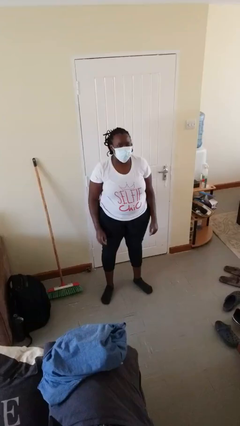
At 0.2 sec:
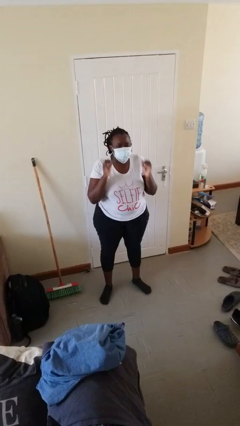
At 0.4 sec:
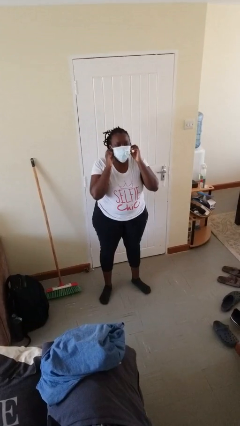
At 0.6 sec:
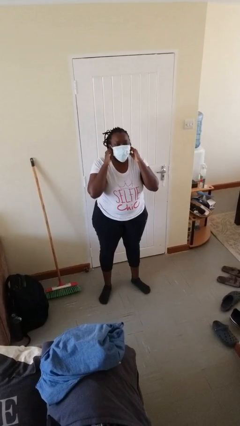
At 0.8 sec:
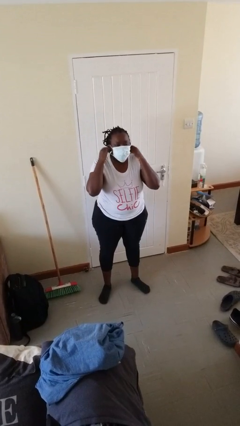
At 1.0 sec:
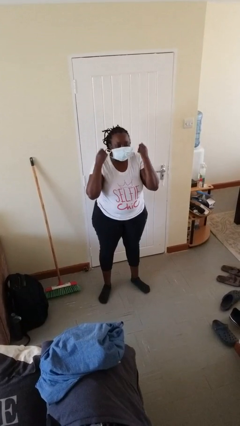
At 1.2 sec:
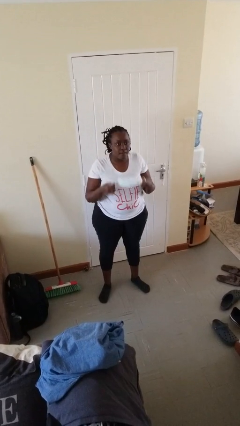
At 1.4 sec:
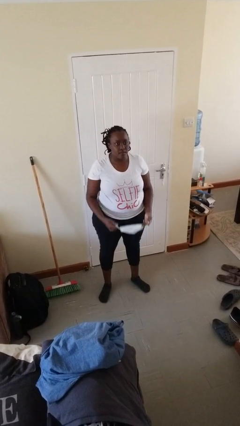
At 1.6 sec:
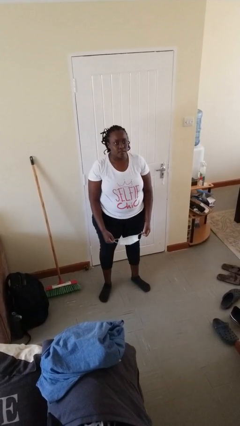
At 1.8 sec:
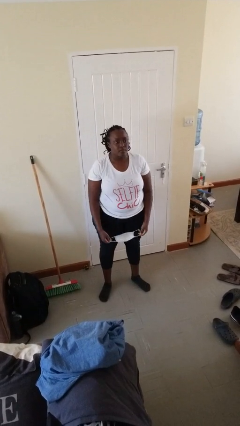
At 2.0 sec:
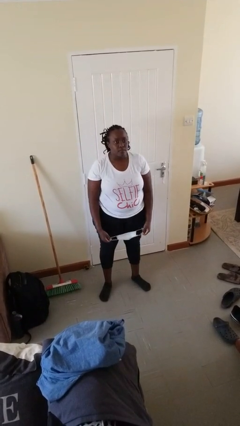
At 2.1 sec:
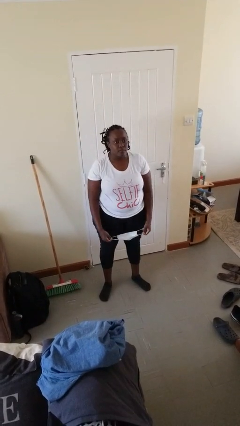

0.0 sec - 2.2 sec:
person takes off facemask

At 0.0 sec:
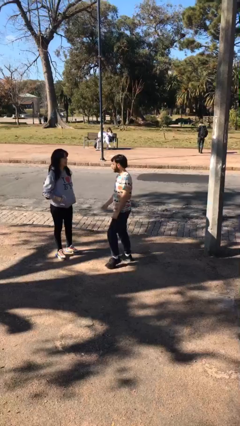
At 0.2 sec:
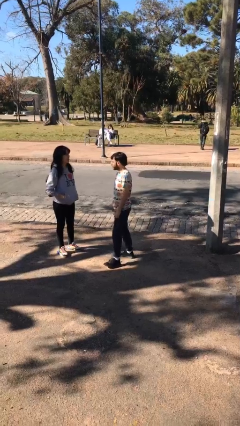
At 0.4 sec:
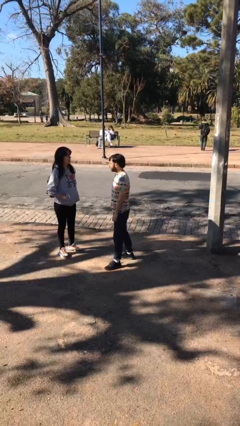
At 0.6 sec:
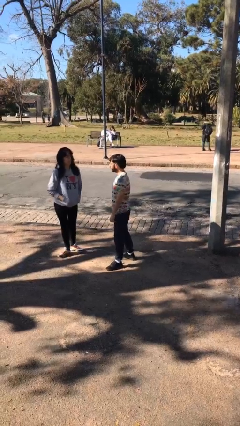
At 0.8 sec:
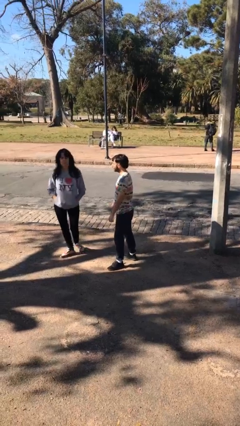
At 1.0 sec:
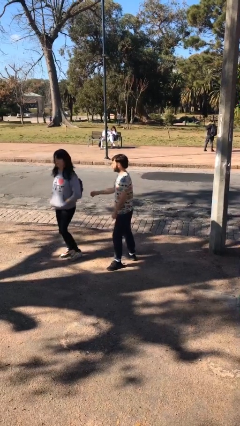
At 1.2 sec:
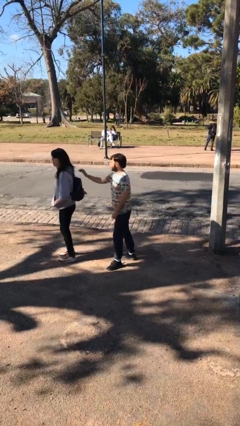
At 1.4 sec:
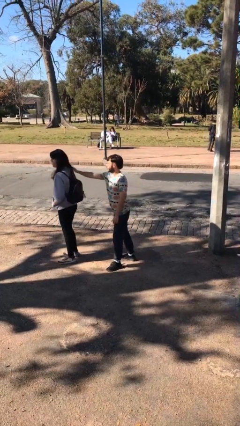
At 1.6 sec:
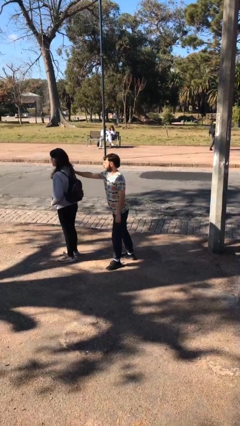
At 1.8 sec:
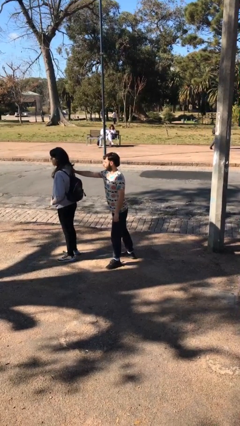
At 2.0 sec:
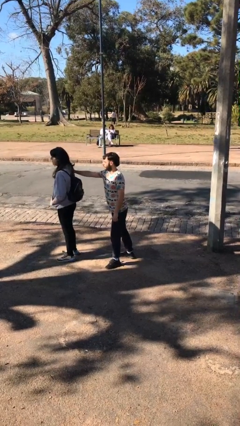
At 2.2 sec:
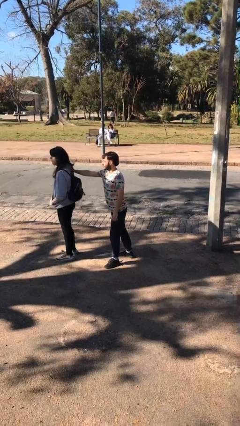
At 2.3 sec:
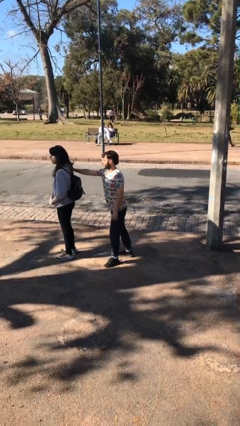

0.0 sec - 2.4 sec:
person grabs person by shoulder

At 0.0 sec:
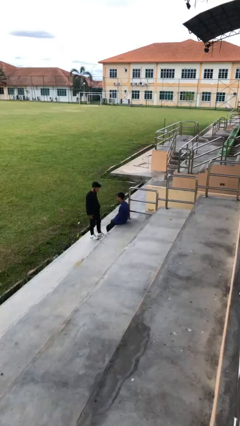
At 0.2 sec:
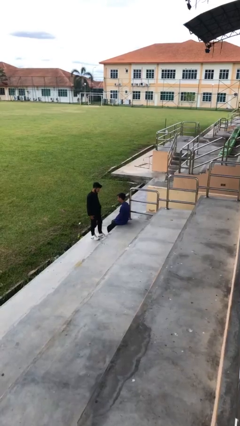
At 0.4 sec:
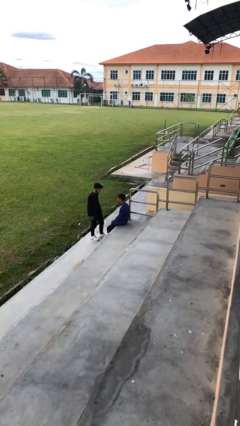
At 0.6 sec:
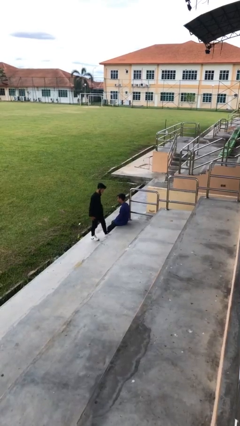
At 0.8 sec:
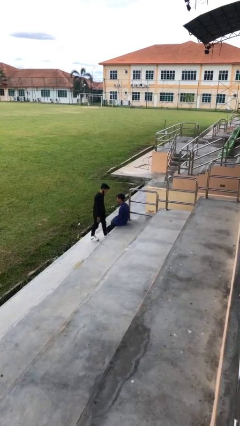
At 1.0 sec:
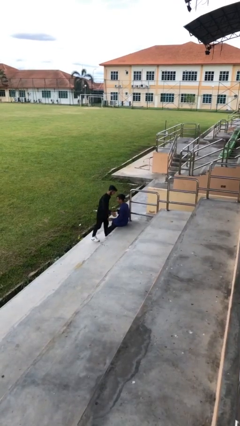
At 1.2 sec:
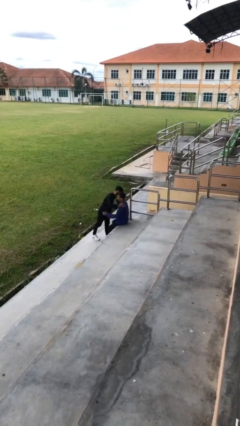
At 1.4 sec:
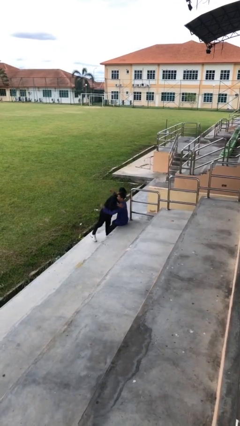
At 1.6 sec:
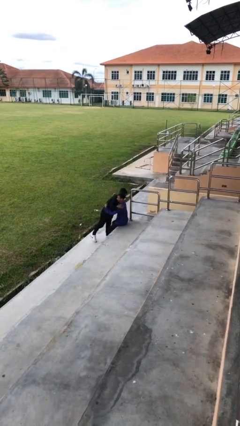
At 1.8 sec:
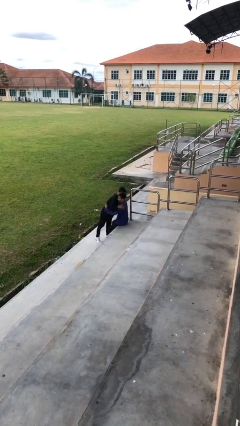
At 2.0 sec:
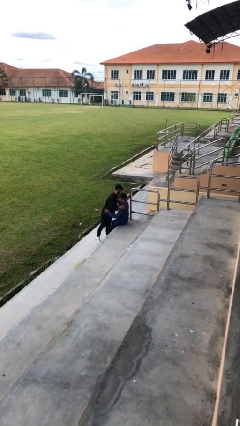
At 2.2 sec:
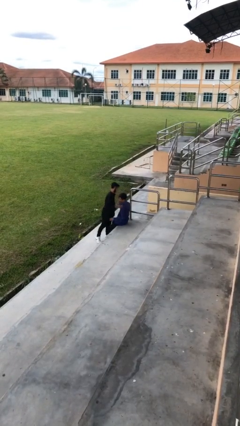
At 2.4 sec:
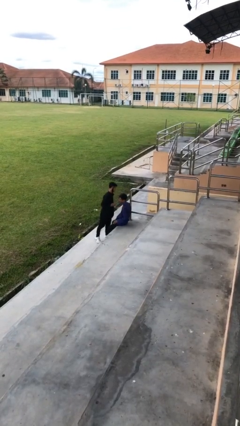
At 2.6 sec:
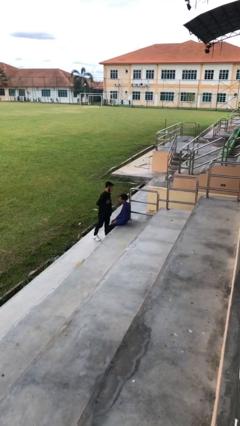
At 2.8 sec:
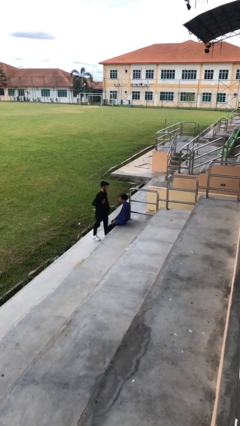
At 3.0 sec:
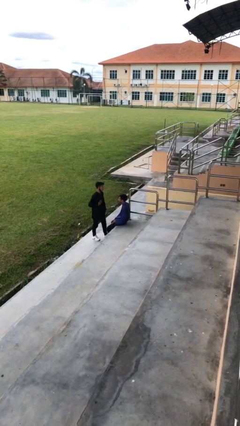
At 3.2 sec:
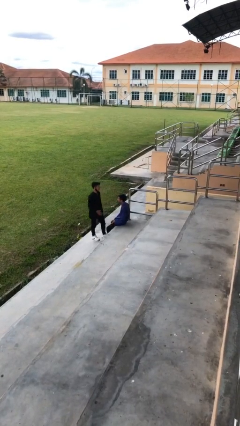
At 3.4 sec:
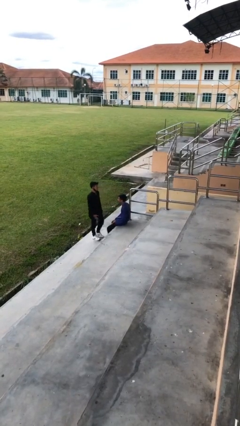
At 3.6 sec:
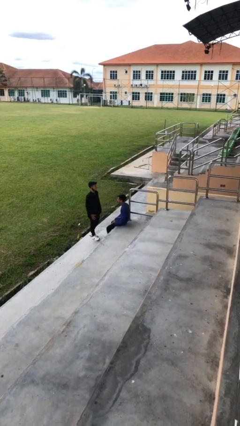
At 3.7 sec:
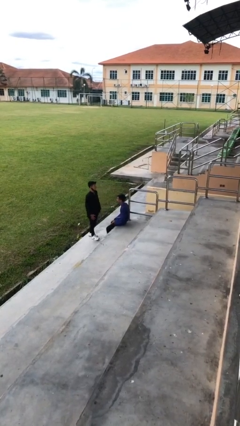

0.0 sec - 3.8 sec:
person embraces person

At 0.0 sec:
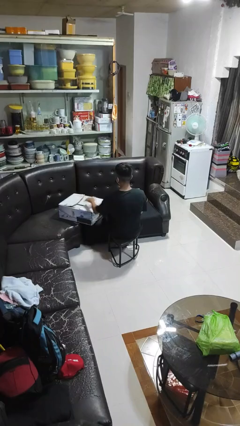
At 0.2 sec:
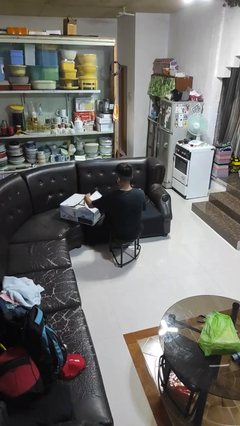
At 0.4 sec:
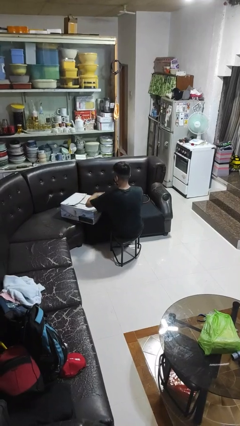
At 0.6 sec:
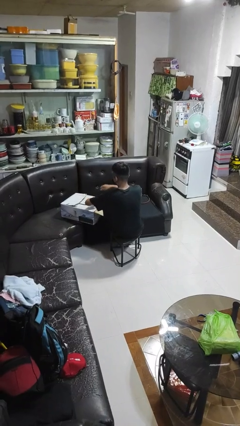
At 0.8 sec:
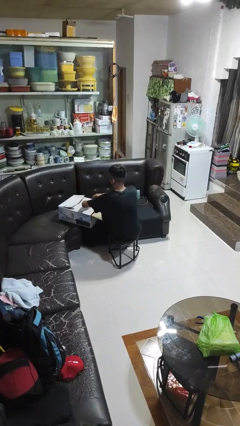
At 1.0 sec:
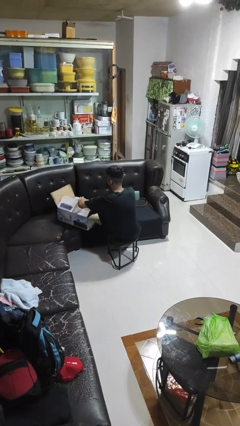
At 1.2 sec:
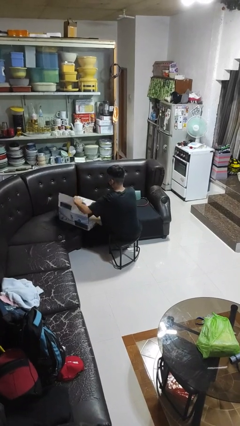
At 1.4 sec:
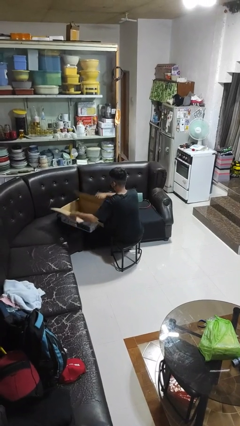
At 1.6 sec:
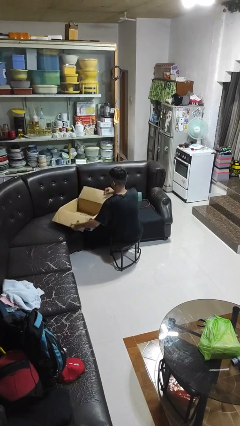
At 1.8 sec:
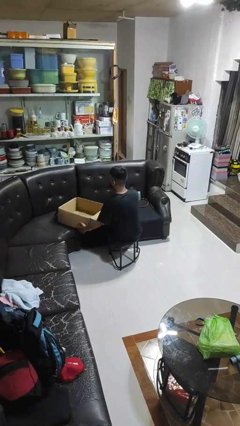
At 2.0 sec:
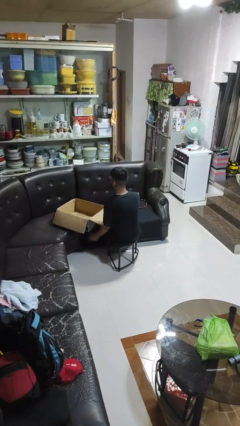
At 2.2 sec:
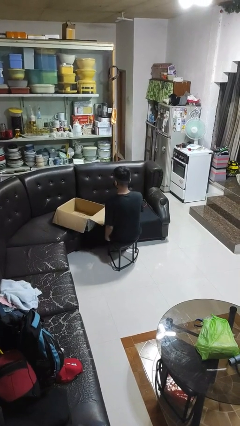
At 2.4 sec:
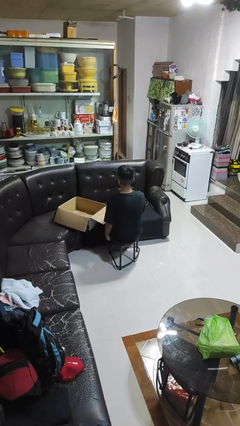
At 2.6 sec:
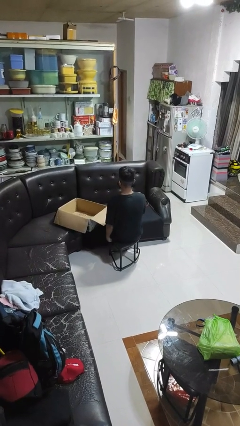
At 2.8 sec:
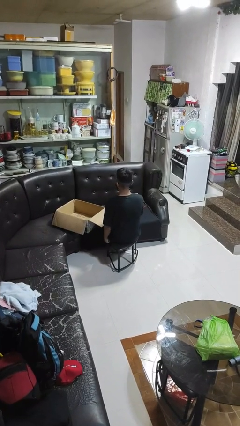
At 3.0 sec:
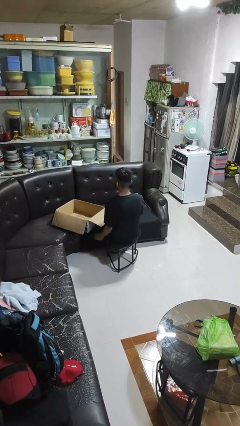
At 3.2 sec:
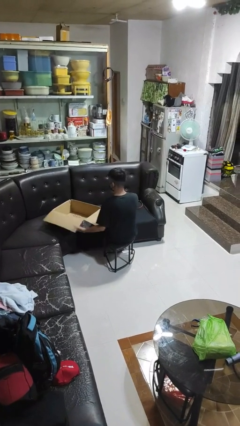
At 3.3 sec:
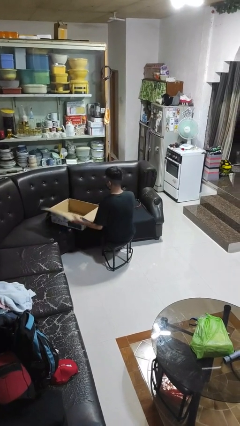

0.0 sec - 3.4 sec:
person opens box

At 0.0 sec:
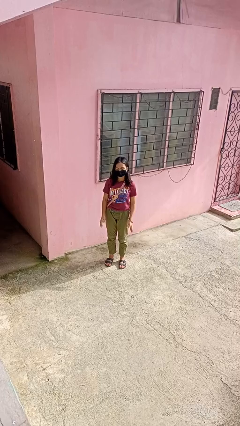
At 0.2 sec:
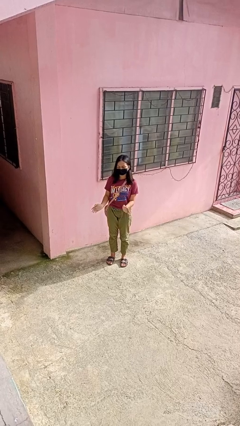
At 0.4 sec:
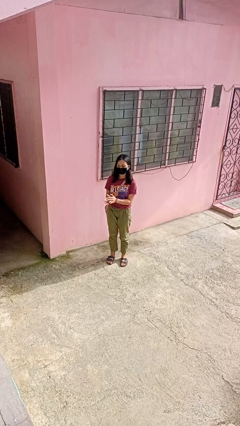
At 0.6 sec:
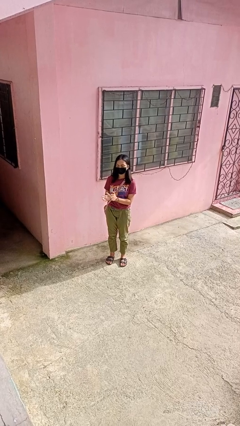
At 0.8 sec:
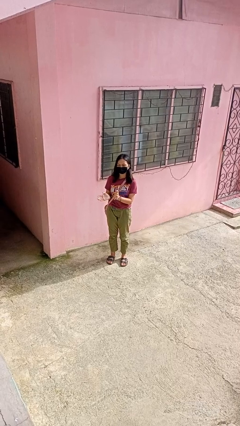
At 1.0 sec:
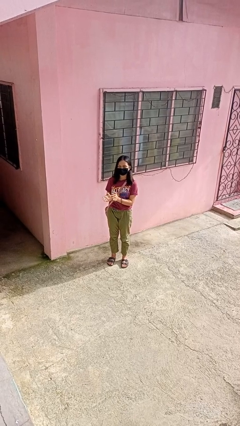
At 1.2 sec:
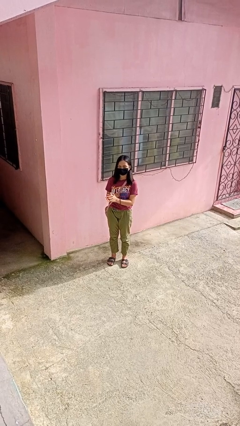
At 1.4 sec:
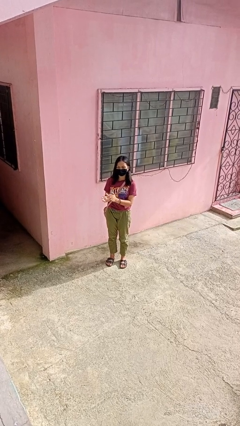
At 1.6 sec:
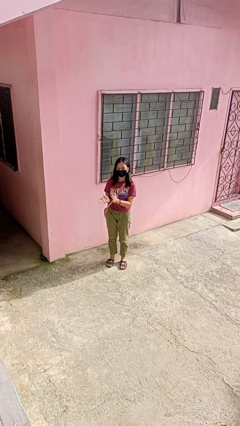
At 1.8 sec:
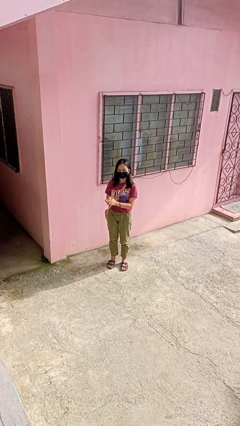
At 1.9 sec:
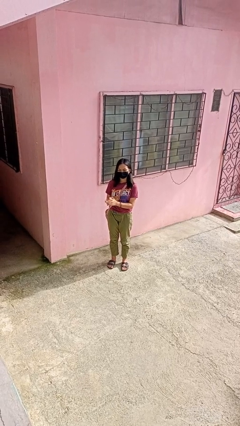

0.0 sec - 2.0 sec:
person claps hands

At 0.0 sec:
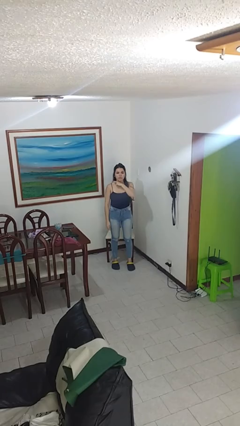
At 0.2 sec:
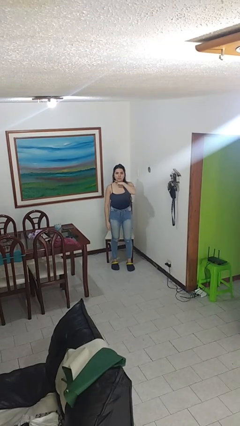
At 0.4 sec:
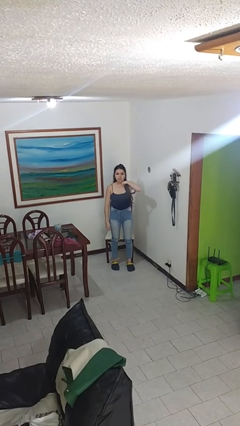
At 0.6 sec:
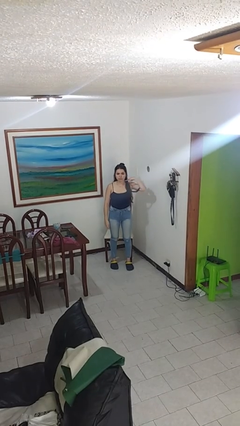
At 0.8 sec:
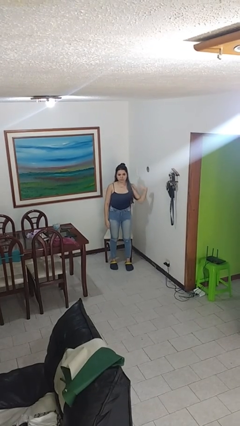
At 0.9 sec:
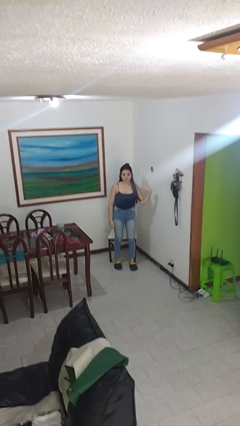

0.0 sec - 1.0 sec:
person gestures cut

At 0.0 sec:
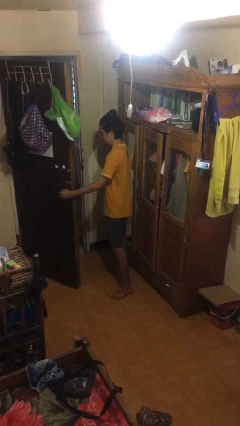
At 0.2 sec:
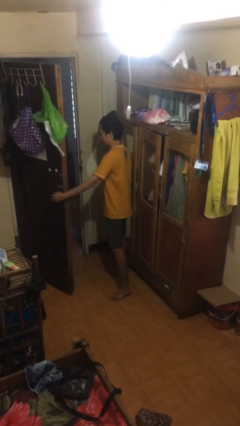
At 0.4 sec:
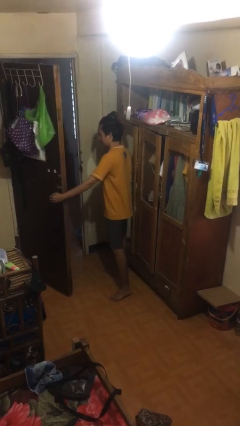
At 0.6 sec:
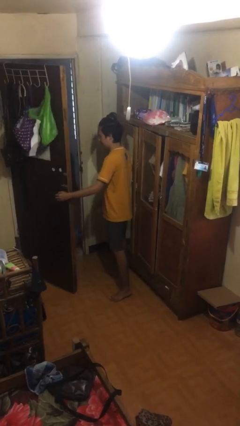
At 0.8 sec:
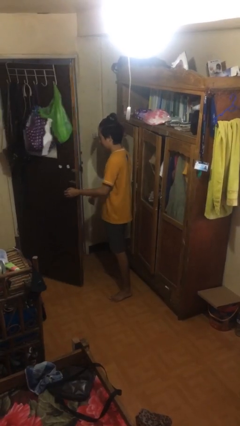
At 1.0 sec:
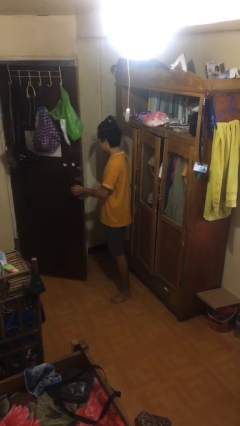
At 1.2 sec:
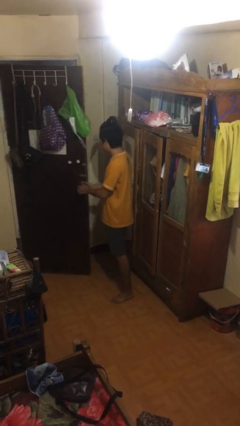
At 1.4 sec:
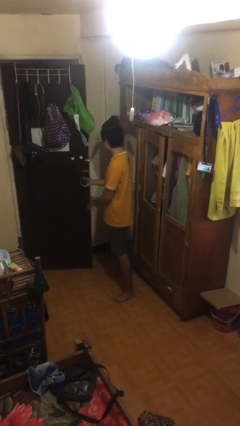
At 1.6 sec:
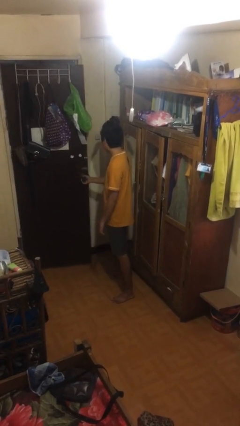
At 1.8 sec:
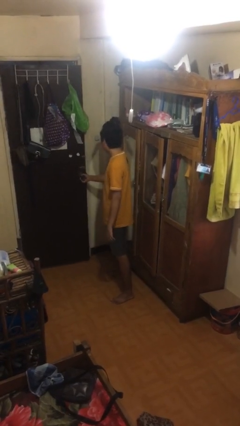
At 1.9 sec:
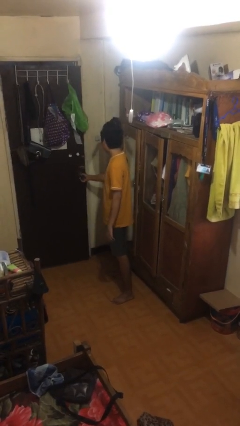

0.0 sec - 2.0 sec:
person closes facility door

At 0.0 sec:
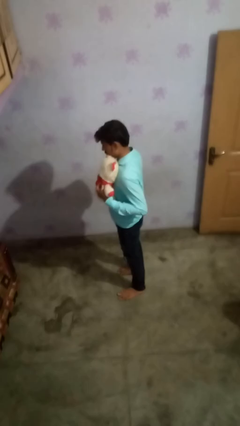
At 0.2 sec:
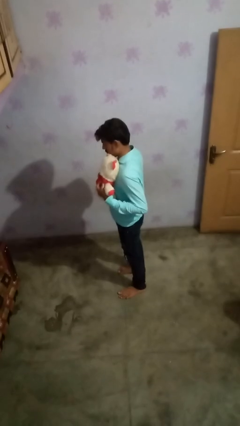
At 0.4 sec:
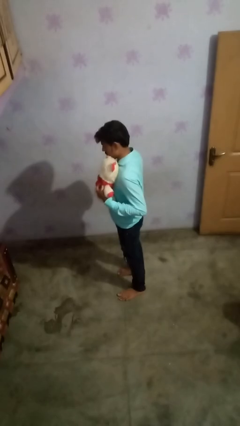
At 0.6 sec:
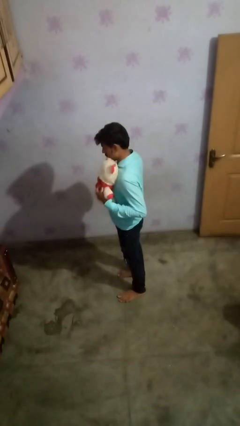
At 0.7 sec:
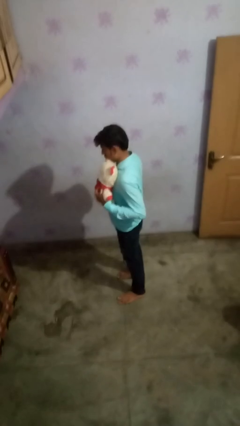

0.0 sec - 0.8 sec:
person hugs stuffed animal
